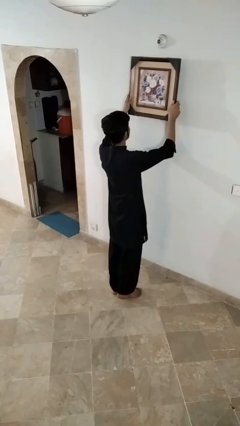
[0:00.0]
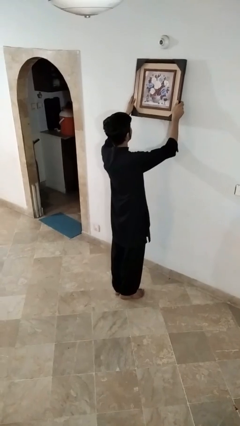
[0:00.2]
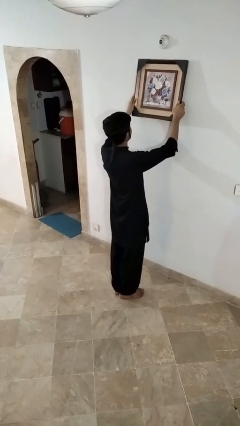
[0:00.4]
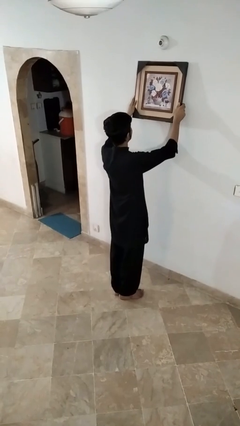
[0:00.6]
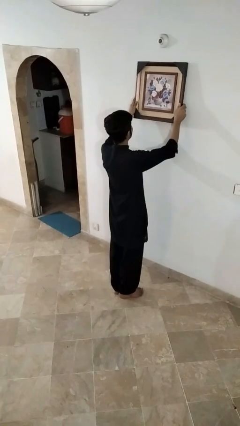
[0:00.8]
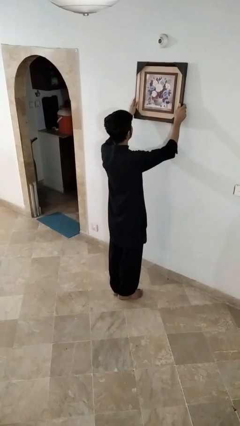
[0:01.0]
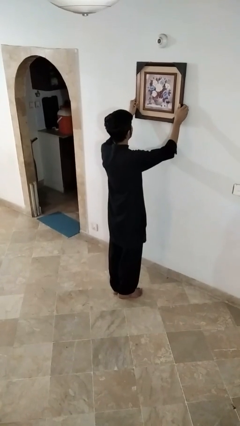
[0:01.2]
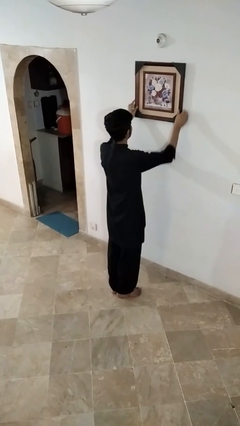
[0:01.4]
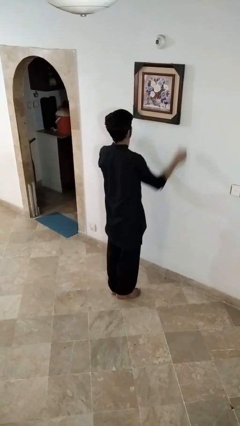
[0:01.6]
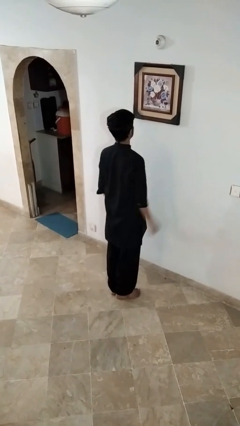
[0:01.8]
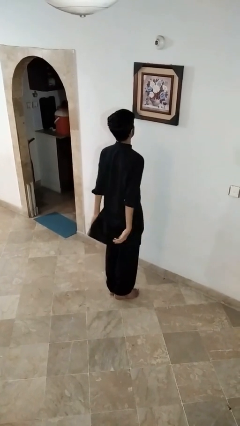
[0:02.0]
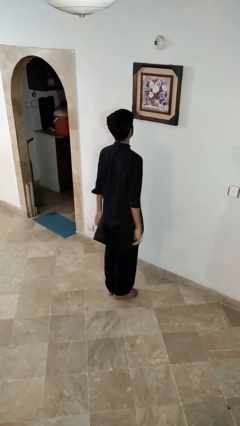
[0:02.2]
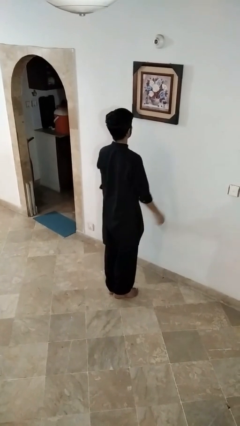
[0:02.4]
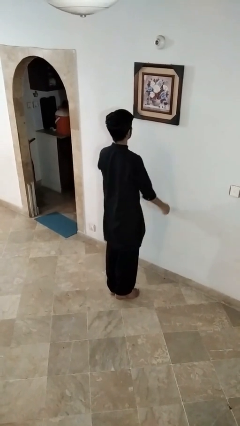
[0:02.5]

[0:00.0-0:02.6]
person puts up picture frame

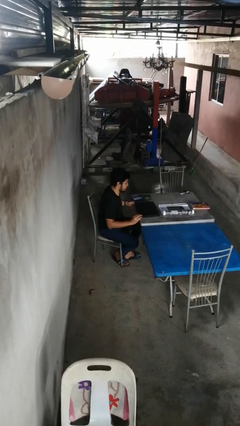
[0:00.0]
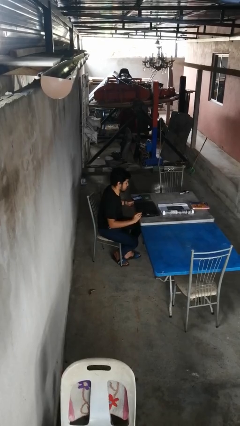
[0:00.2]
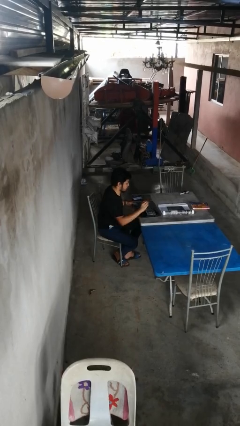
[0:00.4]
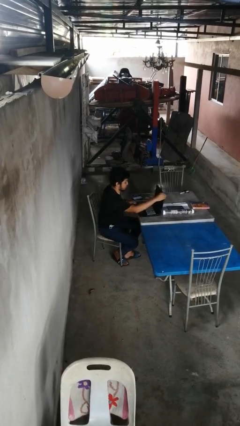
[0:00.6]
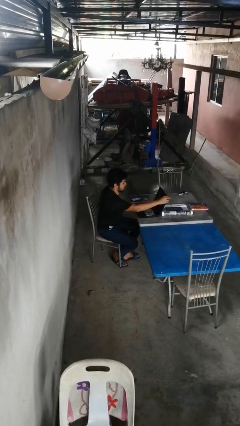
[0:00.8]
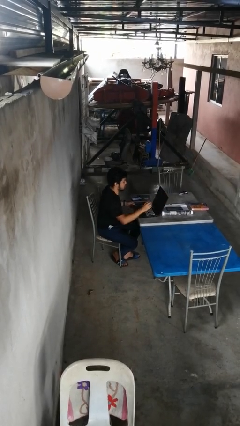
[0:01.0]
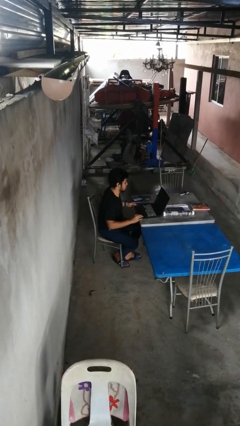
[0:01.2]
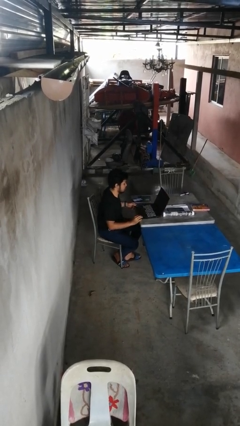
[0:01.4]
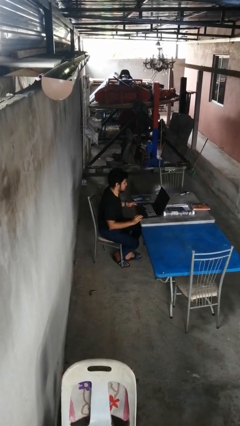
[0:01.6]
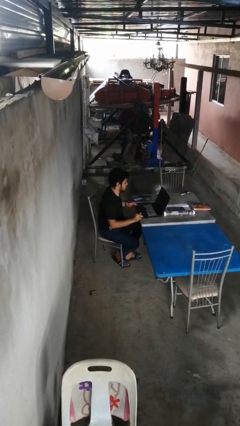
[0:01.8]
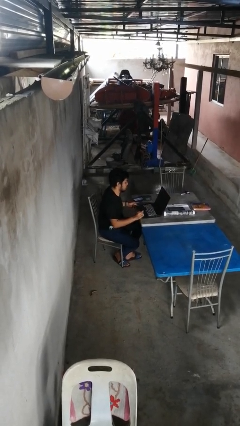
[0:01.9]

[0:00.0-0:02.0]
person opens laptop

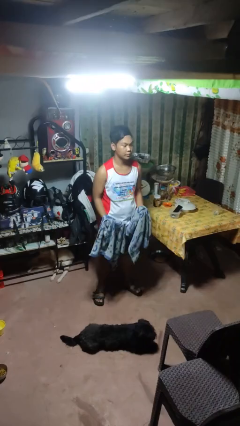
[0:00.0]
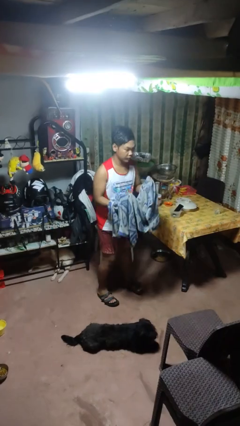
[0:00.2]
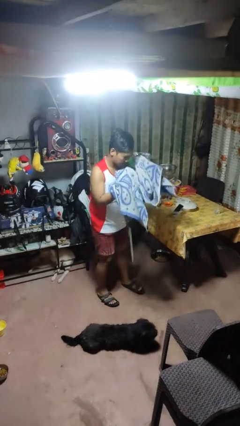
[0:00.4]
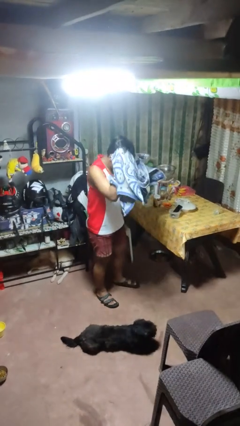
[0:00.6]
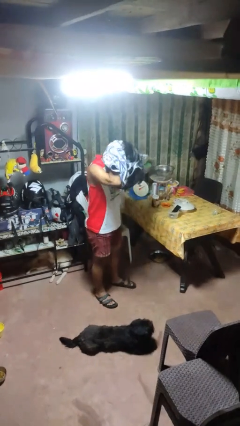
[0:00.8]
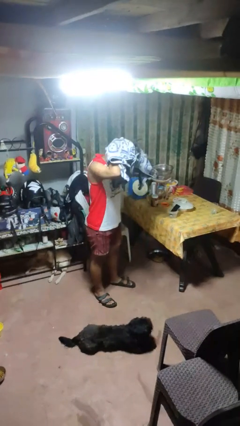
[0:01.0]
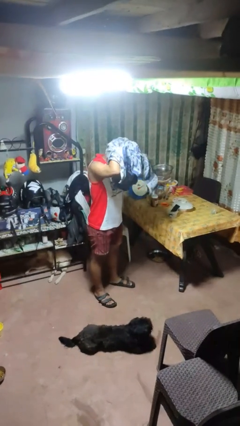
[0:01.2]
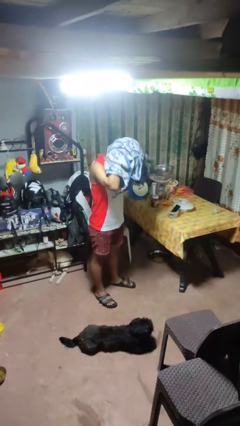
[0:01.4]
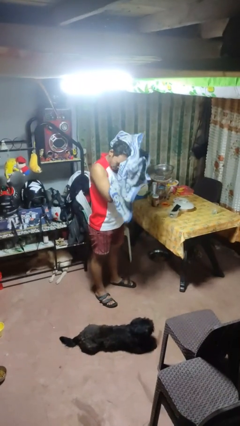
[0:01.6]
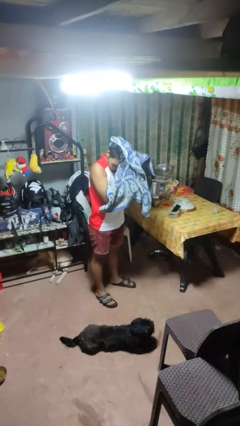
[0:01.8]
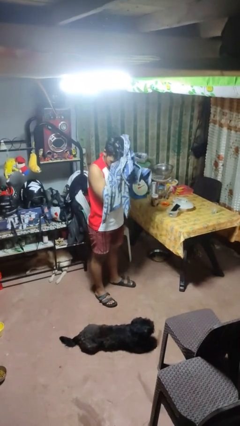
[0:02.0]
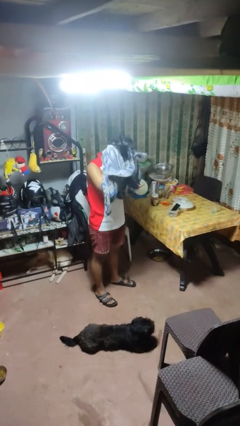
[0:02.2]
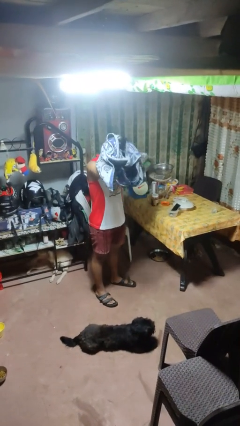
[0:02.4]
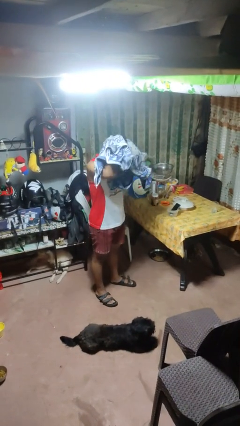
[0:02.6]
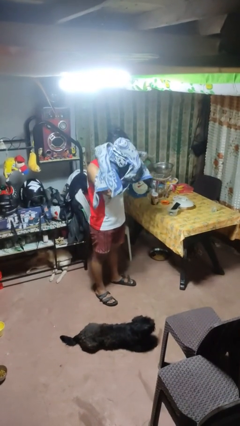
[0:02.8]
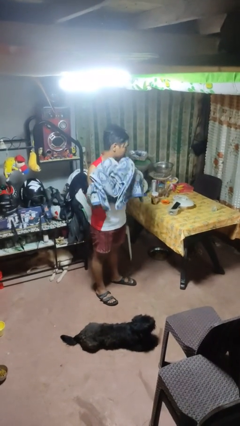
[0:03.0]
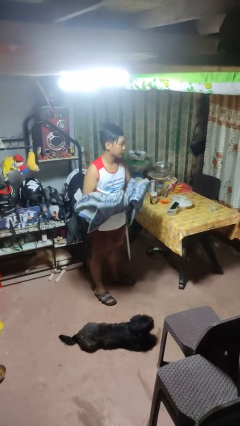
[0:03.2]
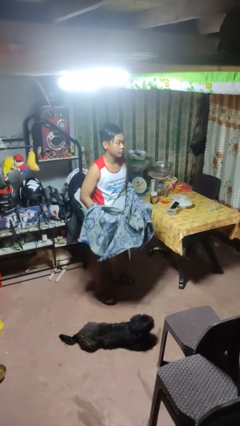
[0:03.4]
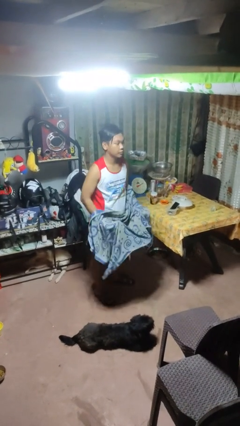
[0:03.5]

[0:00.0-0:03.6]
person dries hair with towel

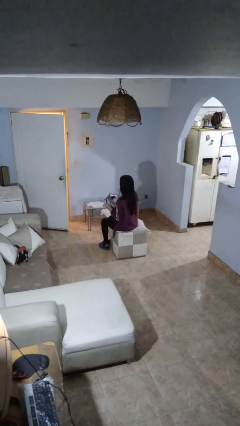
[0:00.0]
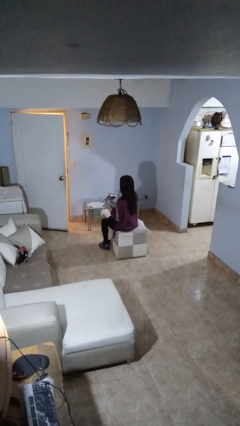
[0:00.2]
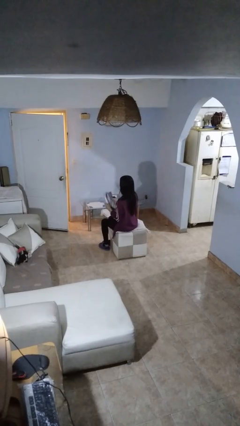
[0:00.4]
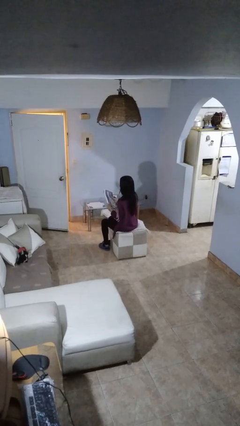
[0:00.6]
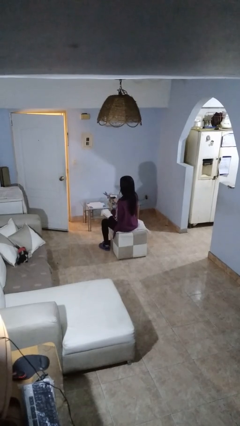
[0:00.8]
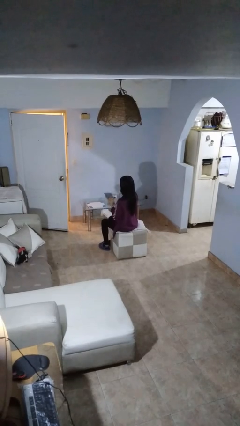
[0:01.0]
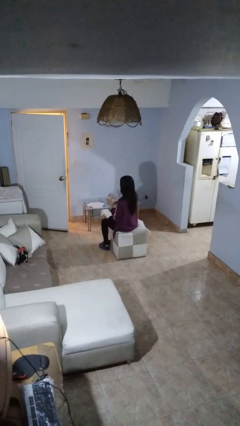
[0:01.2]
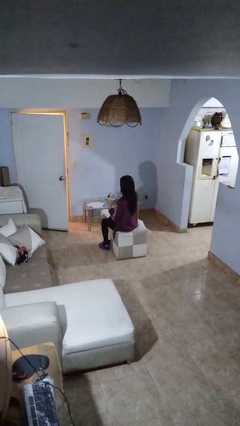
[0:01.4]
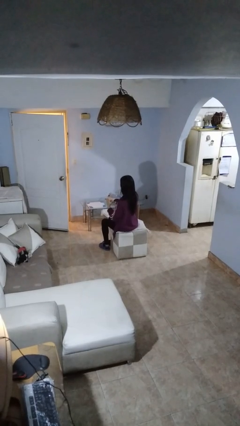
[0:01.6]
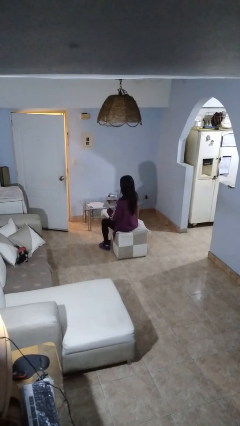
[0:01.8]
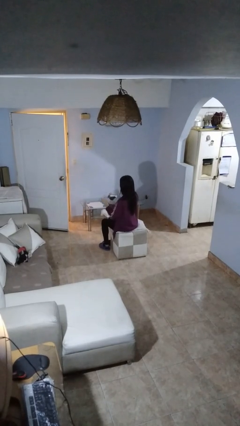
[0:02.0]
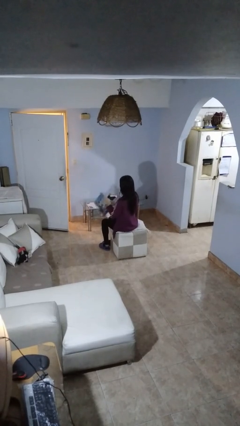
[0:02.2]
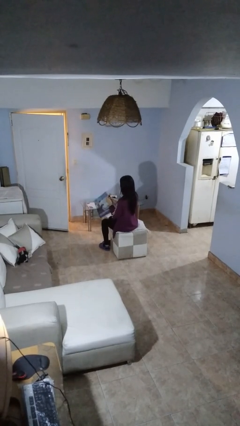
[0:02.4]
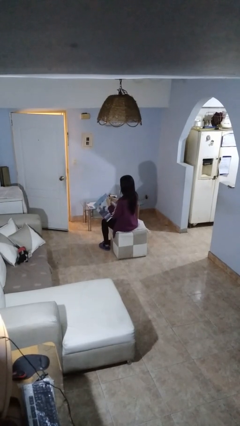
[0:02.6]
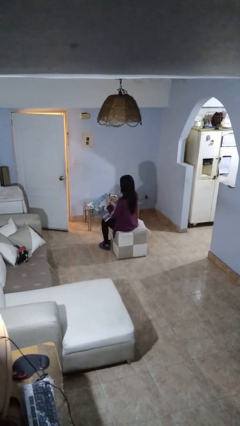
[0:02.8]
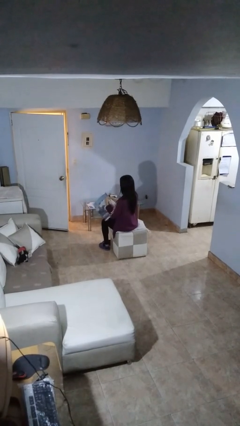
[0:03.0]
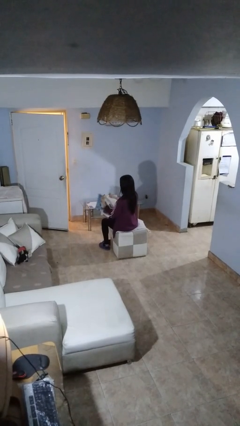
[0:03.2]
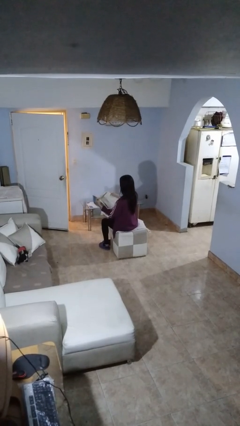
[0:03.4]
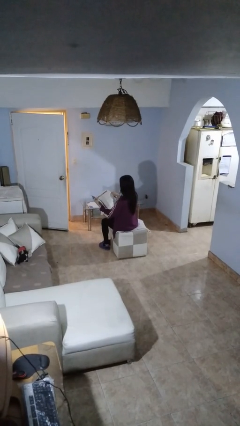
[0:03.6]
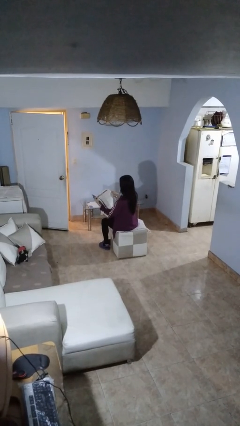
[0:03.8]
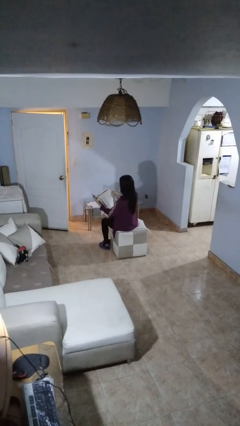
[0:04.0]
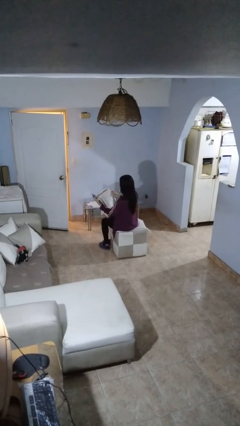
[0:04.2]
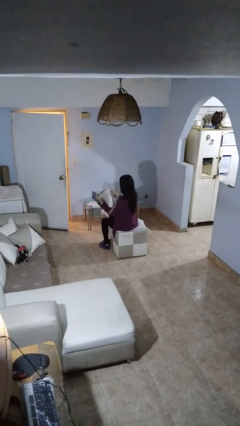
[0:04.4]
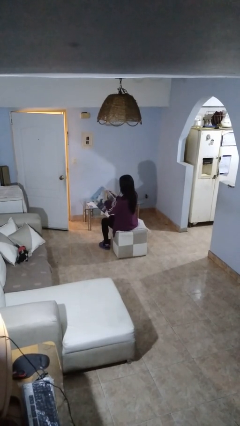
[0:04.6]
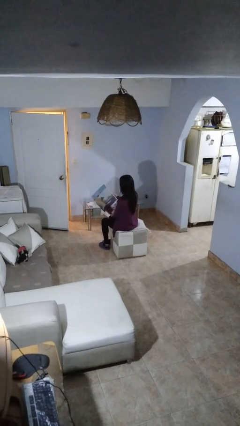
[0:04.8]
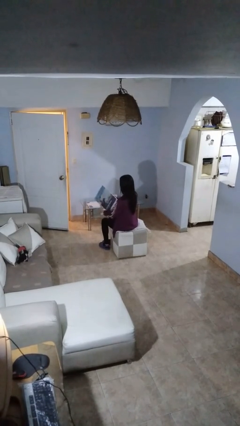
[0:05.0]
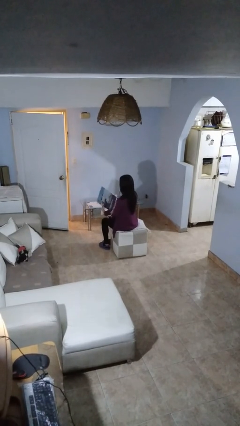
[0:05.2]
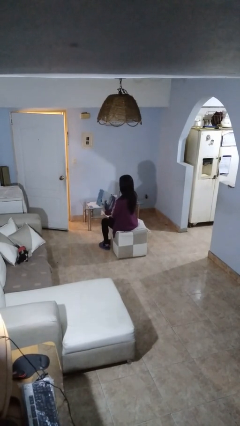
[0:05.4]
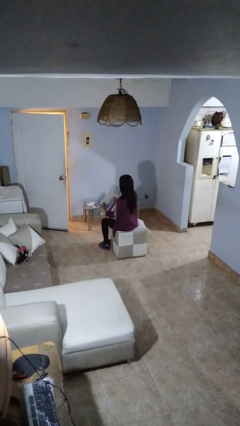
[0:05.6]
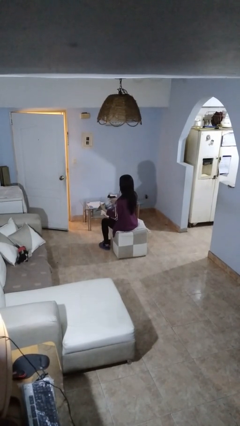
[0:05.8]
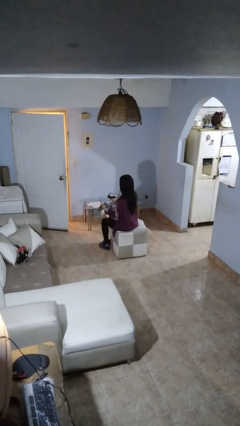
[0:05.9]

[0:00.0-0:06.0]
person reads newspaper

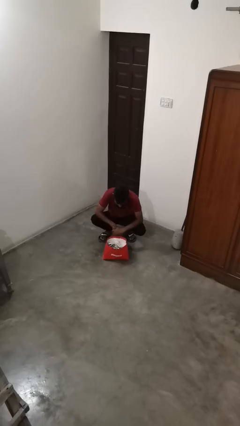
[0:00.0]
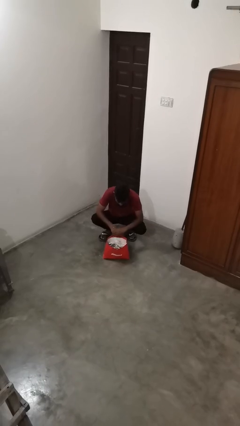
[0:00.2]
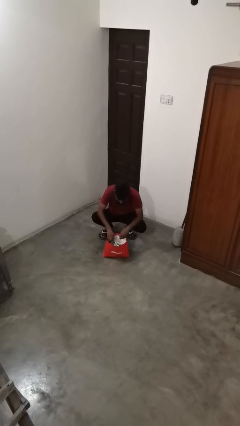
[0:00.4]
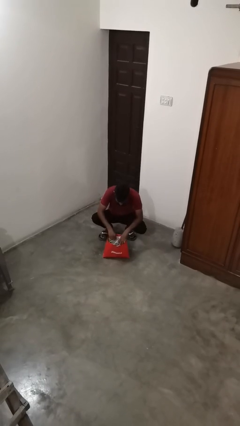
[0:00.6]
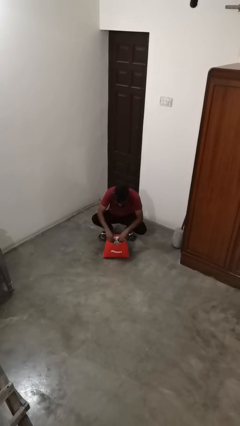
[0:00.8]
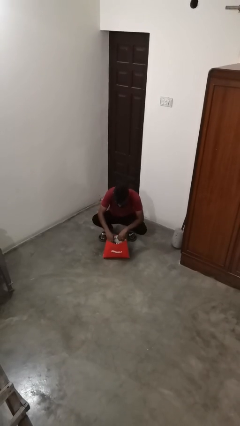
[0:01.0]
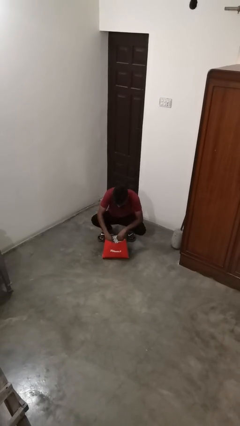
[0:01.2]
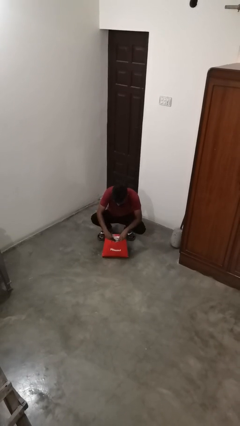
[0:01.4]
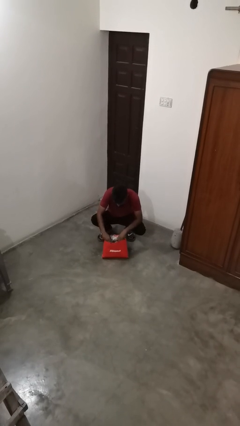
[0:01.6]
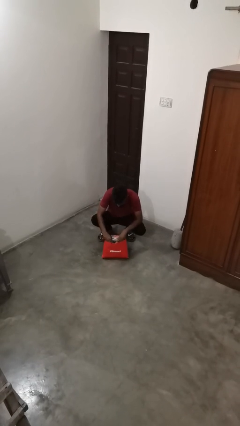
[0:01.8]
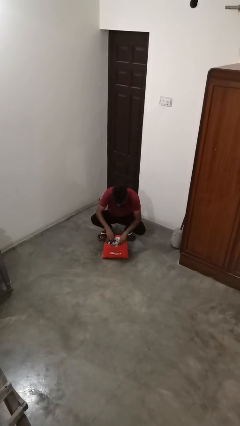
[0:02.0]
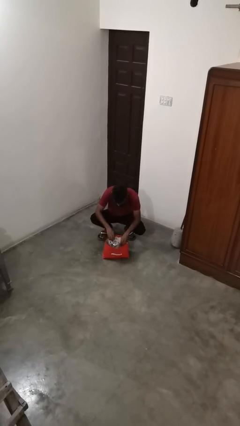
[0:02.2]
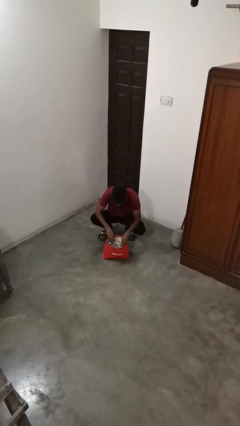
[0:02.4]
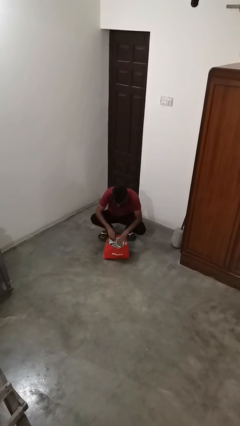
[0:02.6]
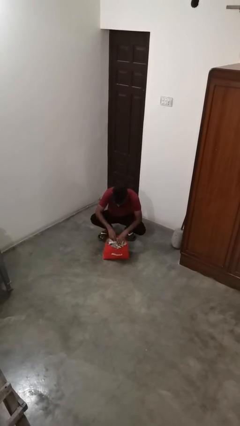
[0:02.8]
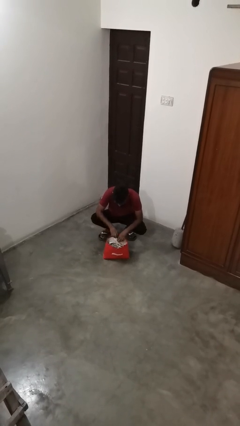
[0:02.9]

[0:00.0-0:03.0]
person searches in bag
